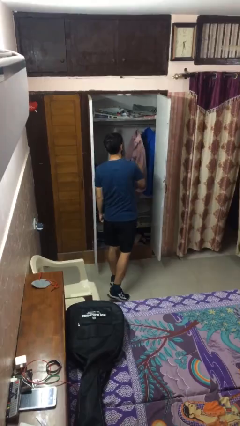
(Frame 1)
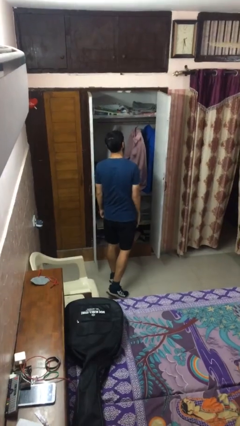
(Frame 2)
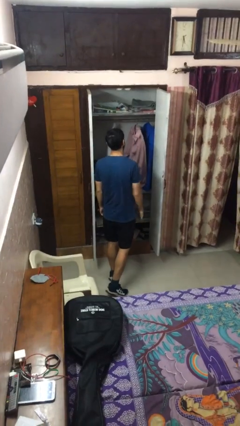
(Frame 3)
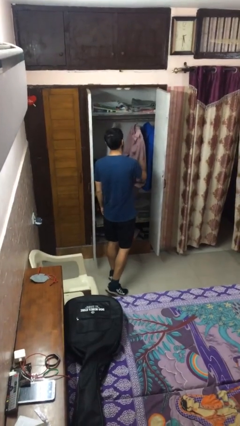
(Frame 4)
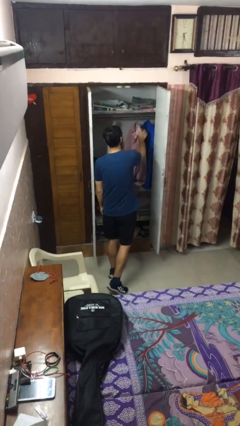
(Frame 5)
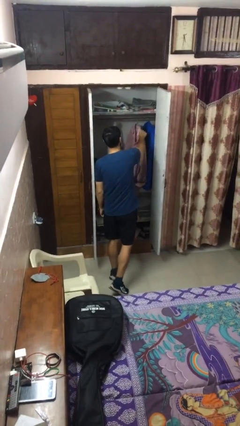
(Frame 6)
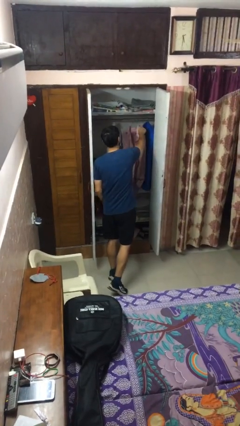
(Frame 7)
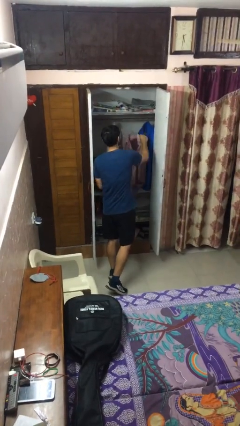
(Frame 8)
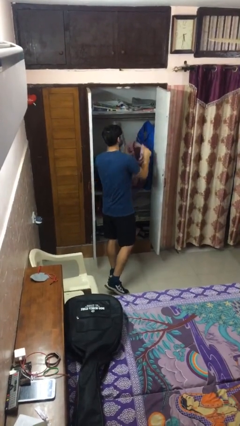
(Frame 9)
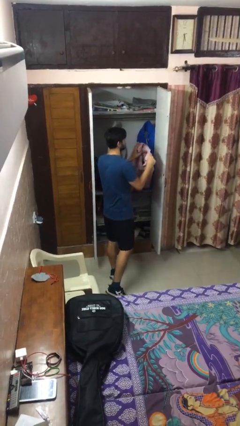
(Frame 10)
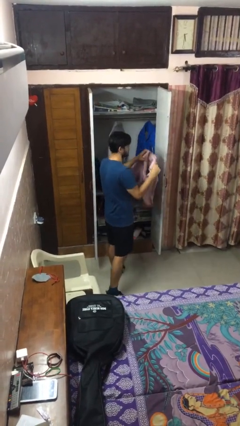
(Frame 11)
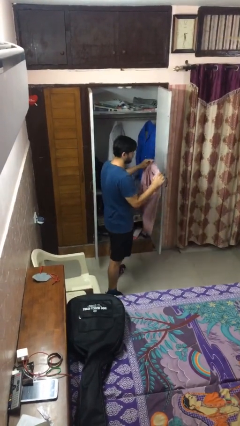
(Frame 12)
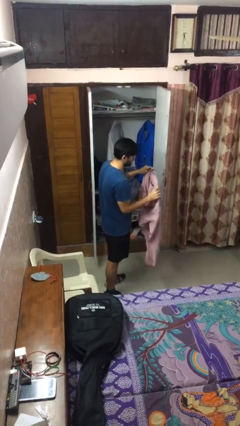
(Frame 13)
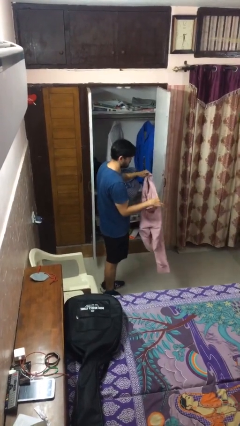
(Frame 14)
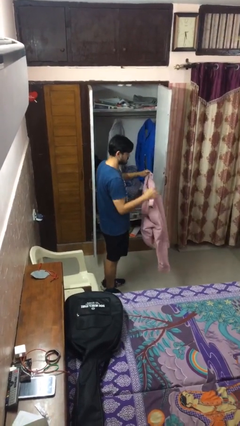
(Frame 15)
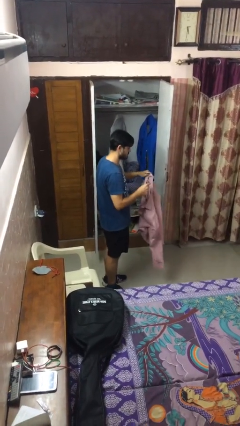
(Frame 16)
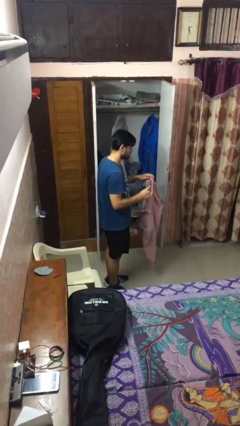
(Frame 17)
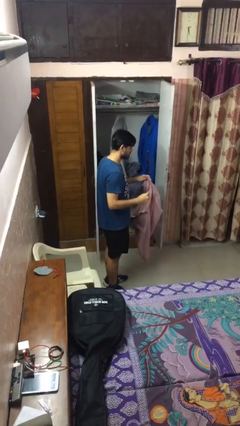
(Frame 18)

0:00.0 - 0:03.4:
person takes clothes from closet

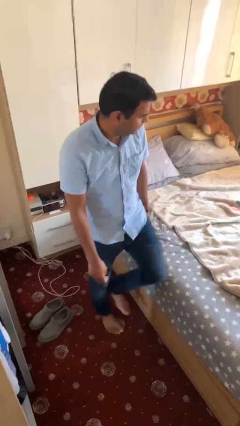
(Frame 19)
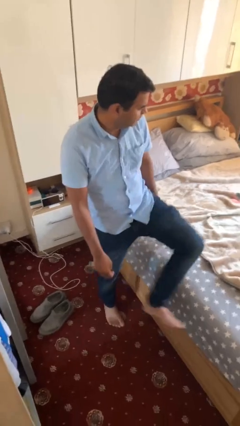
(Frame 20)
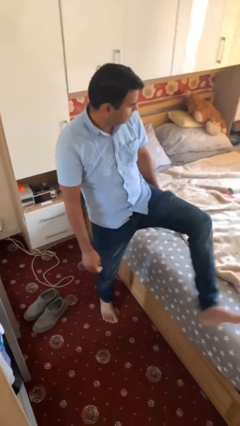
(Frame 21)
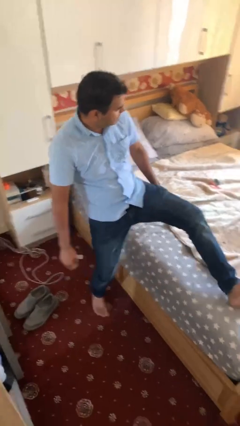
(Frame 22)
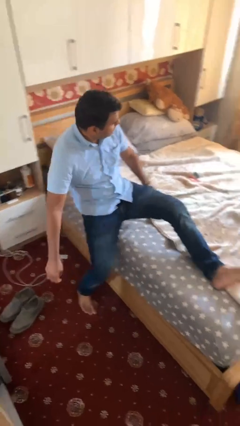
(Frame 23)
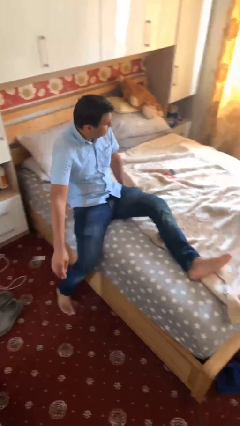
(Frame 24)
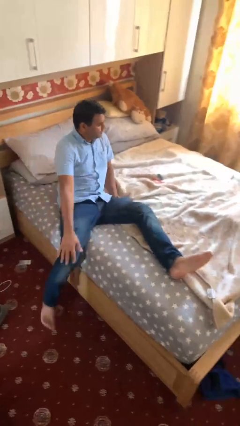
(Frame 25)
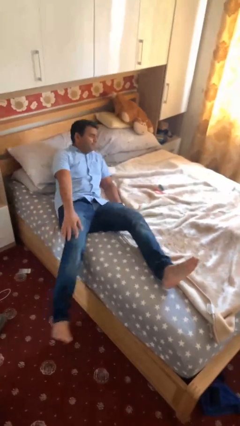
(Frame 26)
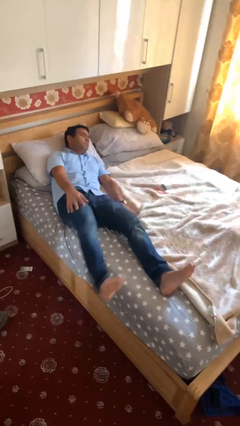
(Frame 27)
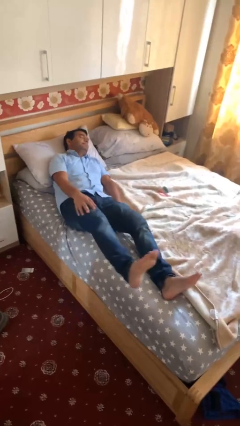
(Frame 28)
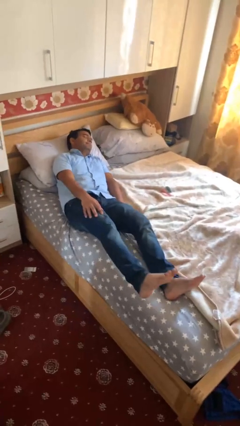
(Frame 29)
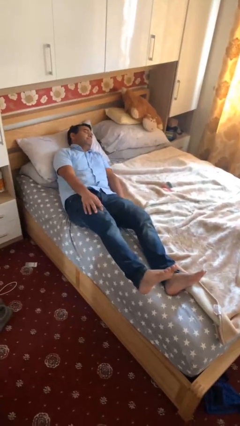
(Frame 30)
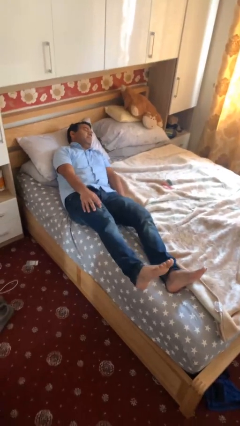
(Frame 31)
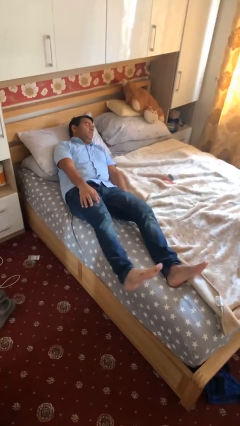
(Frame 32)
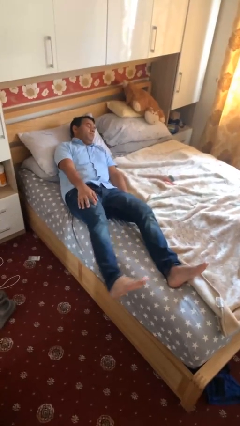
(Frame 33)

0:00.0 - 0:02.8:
person lies down on bed

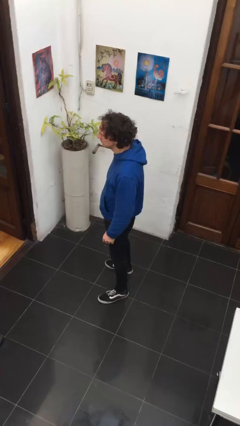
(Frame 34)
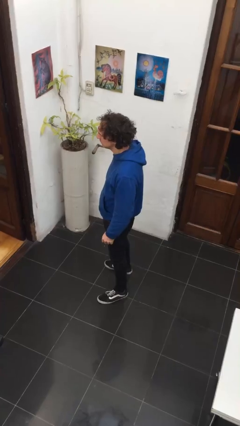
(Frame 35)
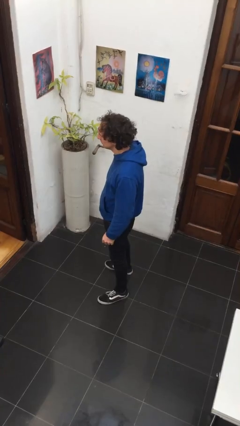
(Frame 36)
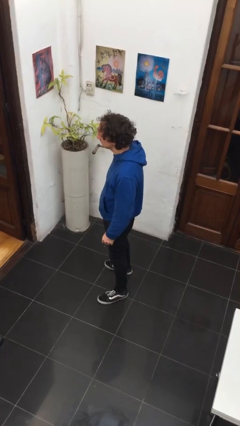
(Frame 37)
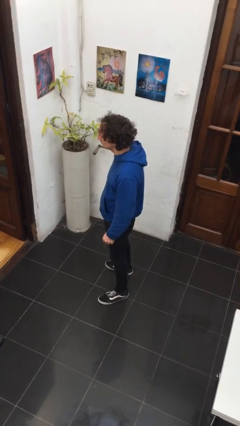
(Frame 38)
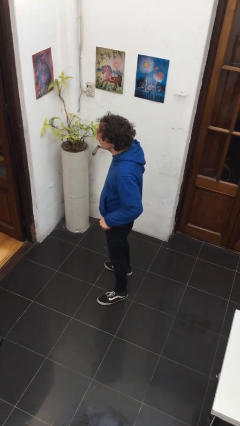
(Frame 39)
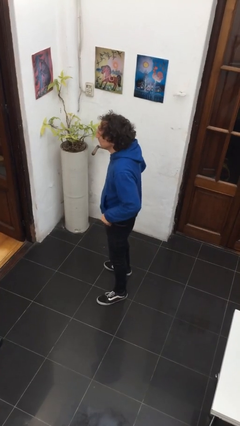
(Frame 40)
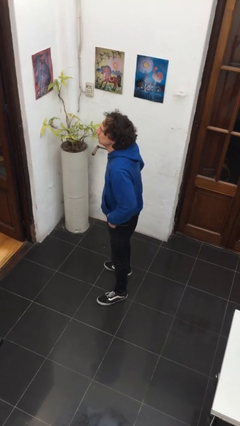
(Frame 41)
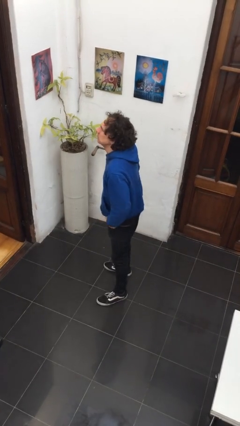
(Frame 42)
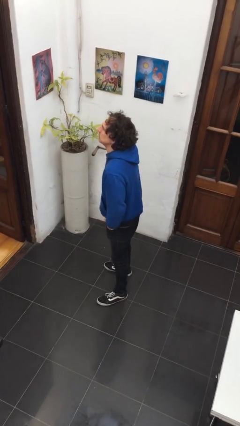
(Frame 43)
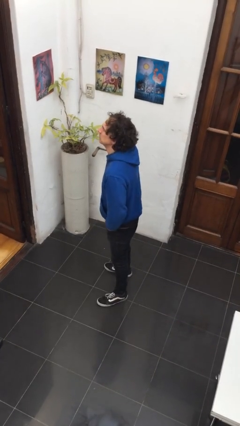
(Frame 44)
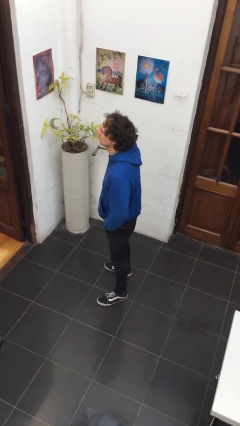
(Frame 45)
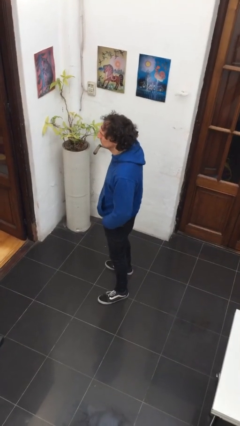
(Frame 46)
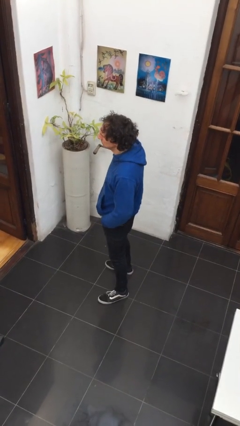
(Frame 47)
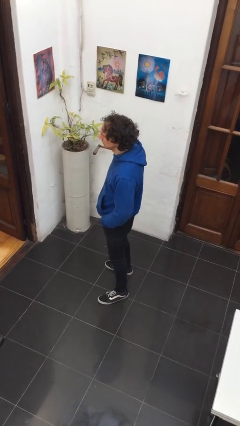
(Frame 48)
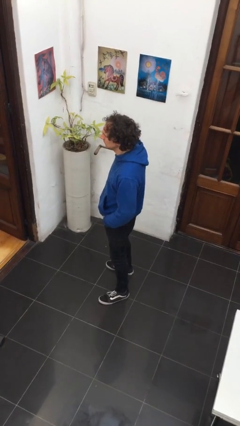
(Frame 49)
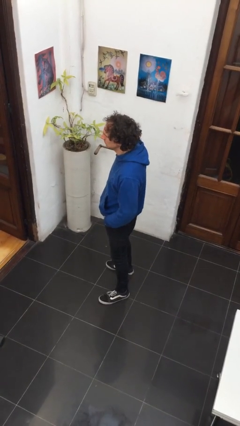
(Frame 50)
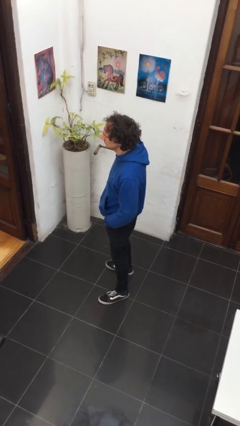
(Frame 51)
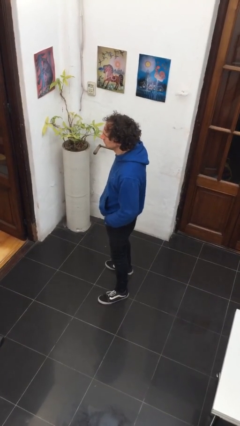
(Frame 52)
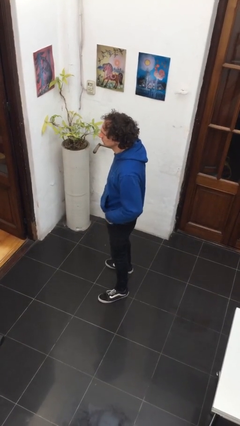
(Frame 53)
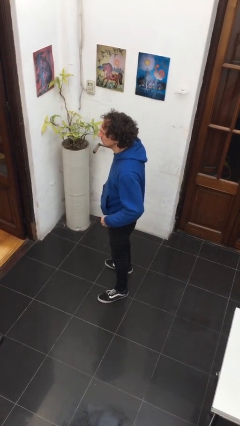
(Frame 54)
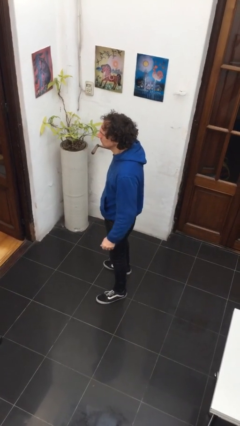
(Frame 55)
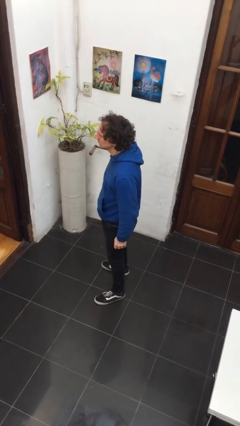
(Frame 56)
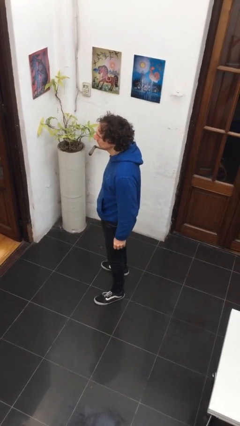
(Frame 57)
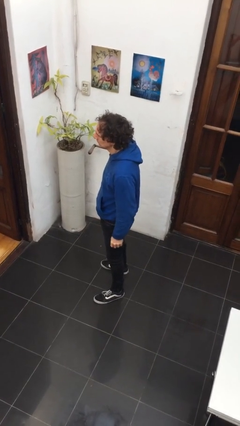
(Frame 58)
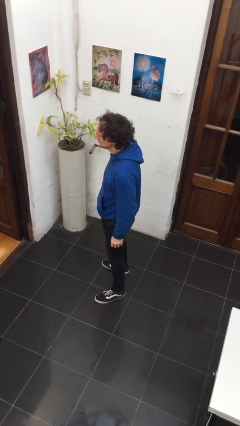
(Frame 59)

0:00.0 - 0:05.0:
person puts hands in back pockets

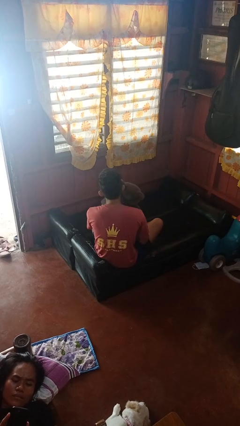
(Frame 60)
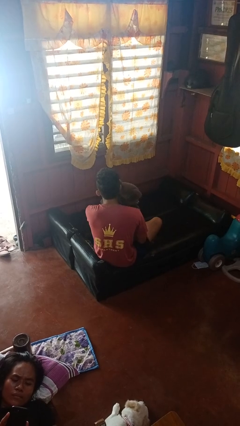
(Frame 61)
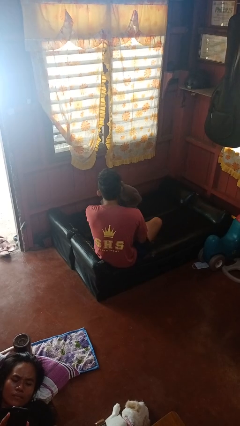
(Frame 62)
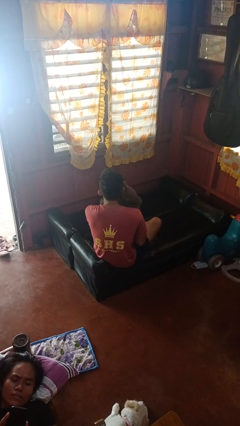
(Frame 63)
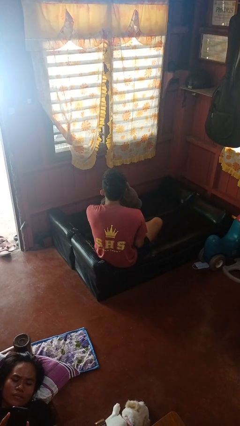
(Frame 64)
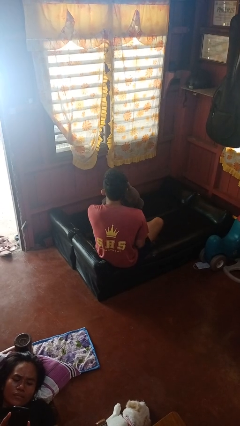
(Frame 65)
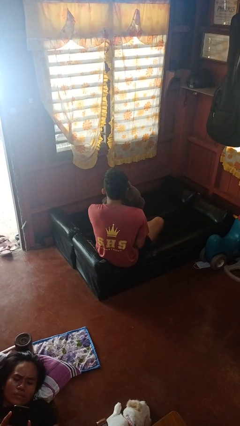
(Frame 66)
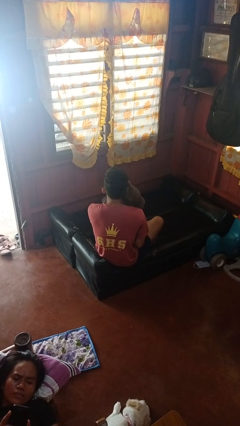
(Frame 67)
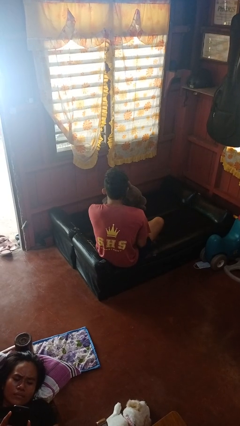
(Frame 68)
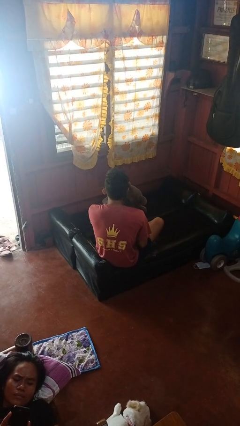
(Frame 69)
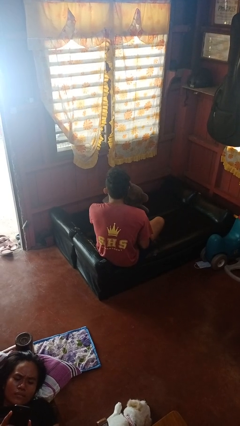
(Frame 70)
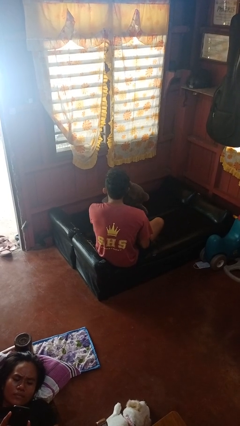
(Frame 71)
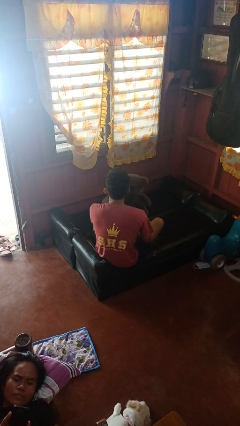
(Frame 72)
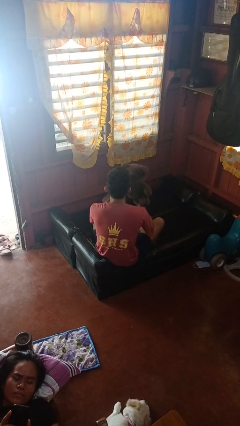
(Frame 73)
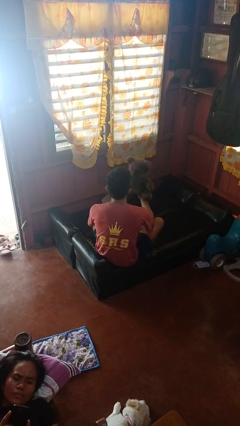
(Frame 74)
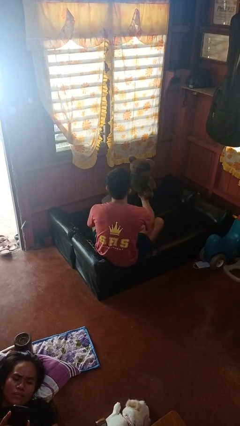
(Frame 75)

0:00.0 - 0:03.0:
person hugs stuffed animal

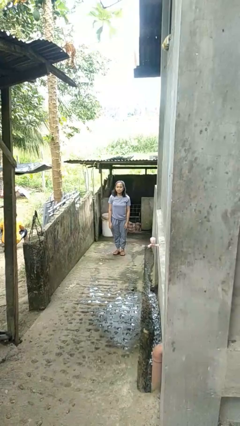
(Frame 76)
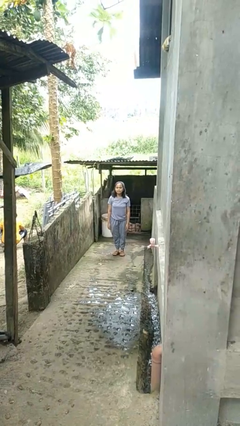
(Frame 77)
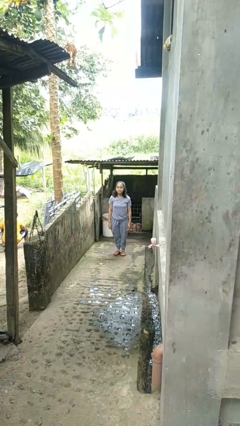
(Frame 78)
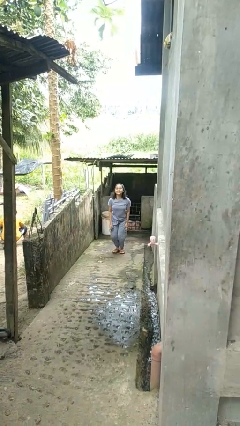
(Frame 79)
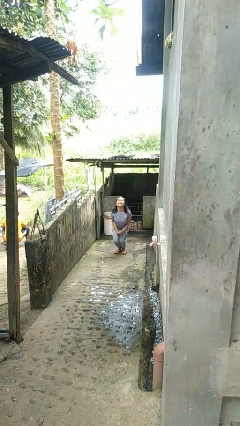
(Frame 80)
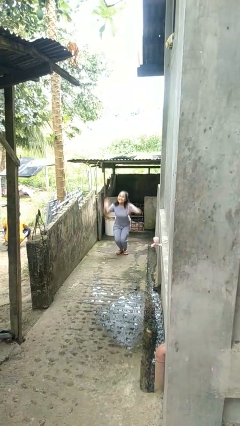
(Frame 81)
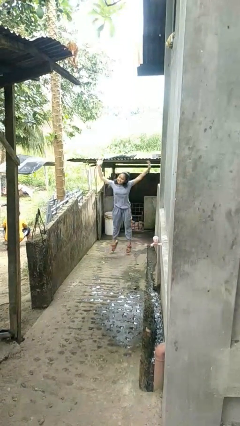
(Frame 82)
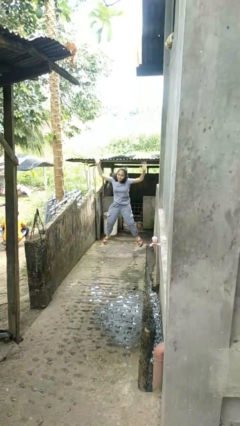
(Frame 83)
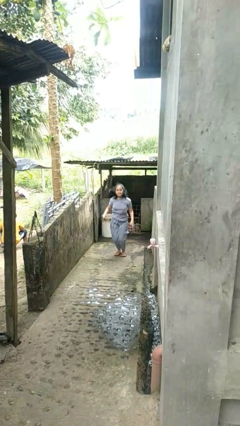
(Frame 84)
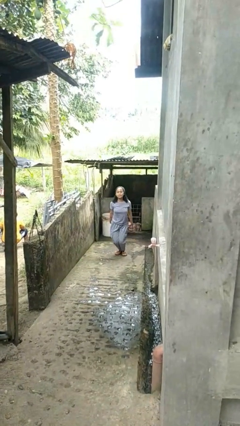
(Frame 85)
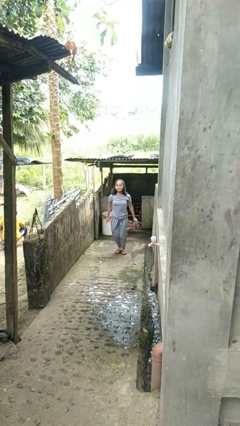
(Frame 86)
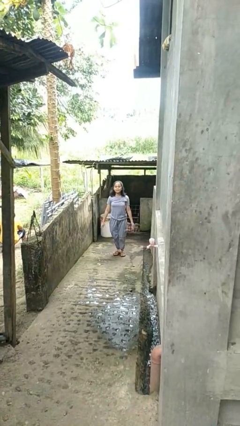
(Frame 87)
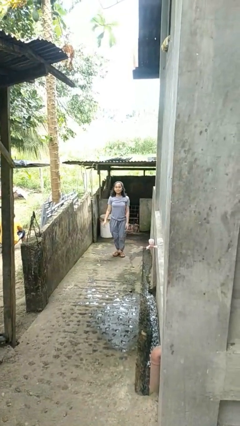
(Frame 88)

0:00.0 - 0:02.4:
person exercises with jumping jacks

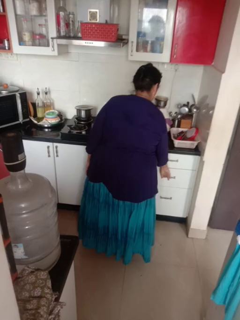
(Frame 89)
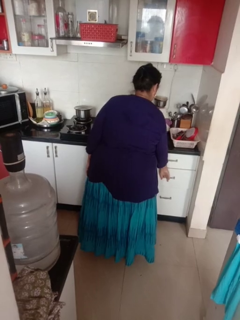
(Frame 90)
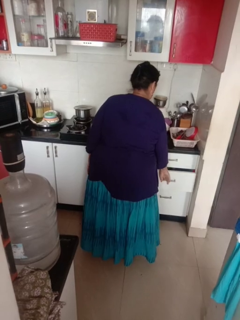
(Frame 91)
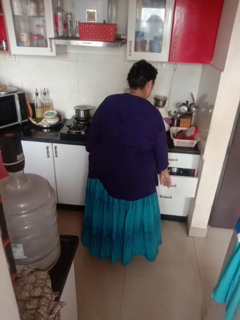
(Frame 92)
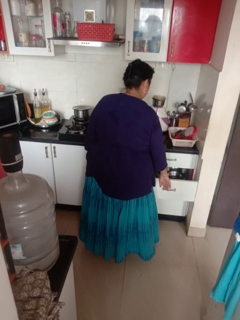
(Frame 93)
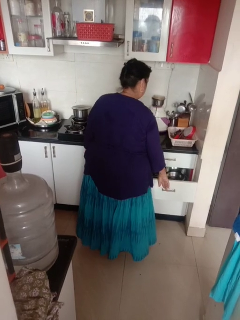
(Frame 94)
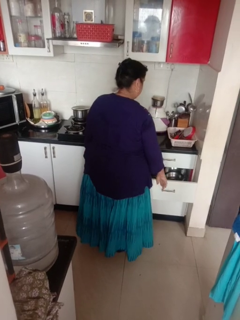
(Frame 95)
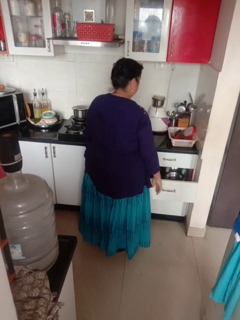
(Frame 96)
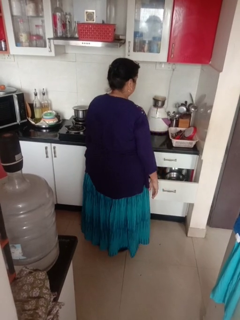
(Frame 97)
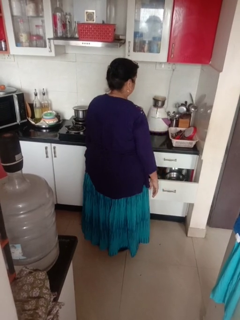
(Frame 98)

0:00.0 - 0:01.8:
person opens kitchen drawer
